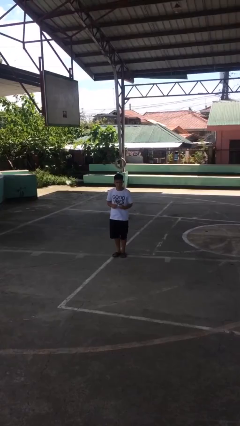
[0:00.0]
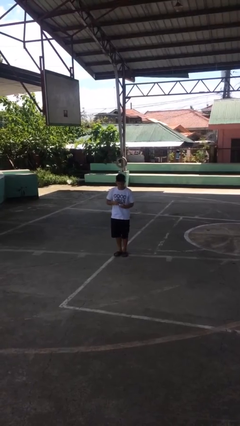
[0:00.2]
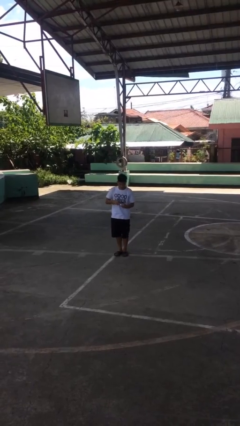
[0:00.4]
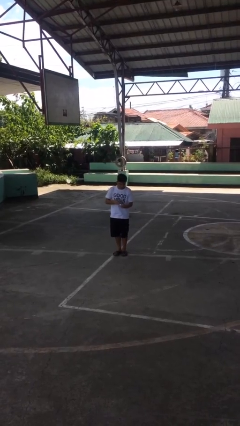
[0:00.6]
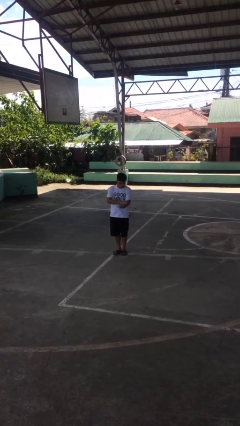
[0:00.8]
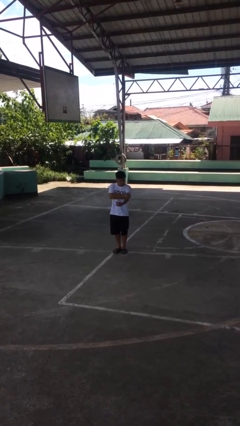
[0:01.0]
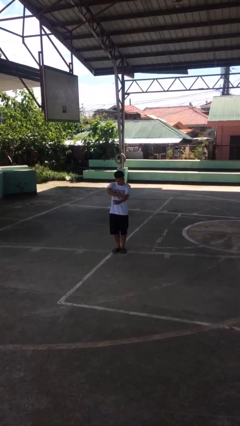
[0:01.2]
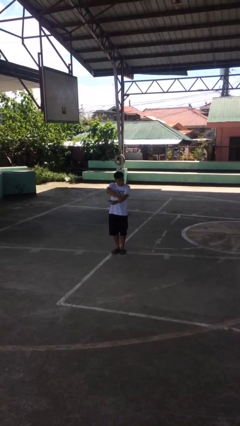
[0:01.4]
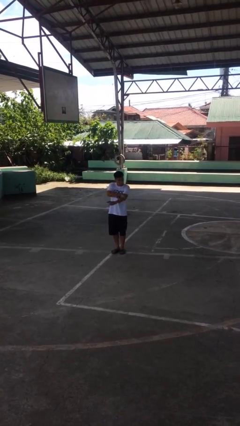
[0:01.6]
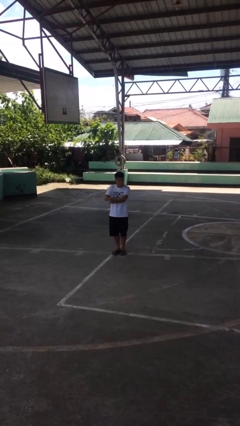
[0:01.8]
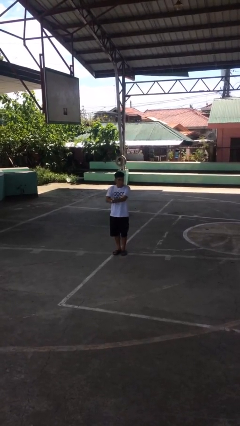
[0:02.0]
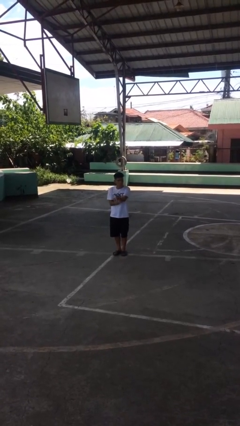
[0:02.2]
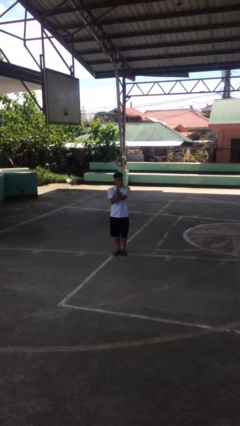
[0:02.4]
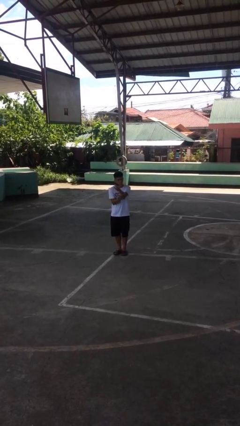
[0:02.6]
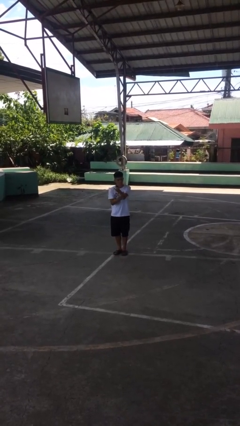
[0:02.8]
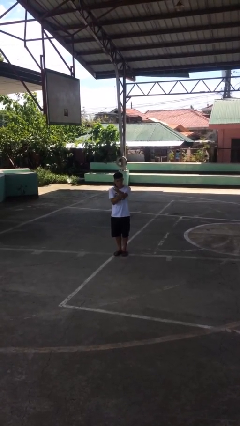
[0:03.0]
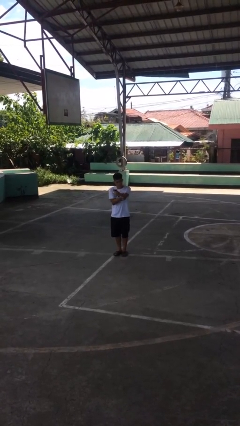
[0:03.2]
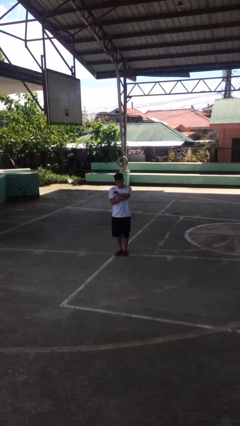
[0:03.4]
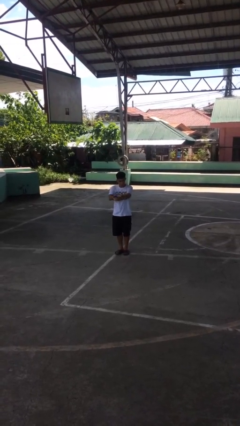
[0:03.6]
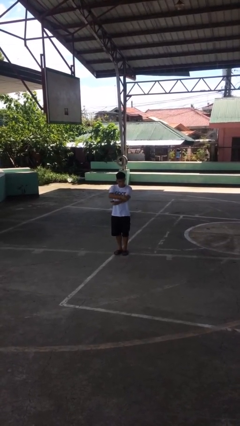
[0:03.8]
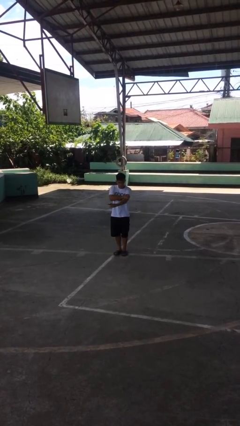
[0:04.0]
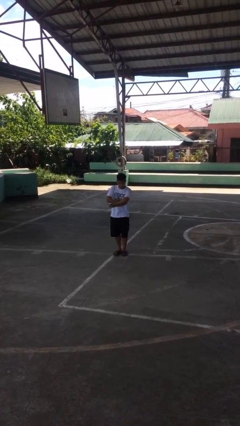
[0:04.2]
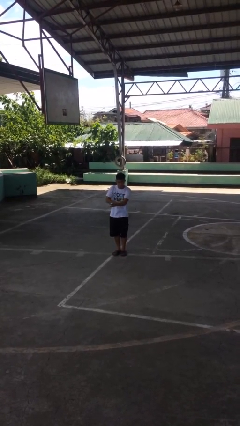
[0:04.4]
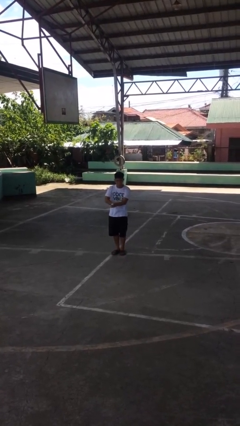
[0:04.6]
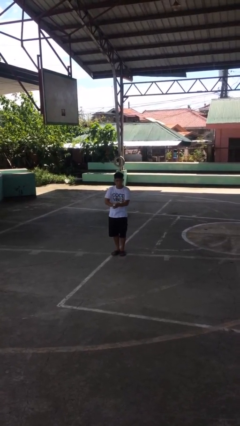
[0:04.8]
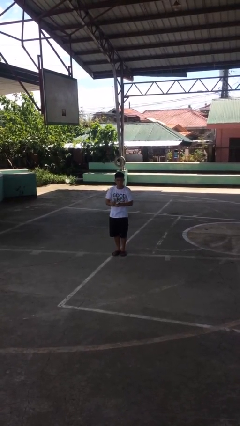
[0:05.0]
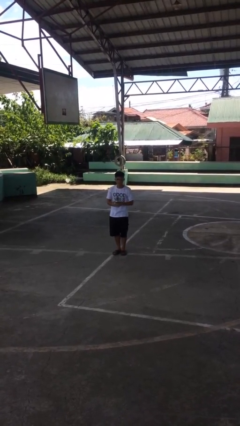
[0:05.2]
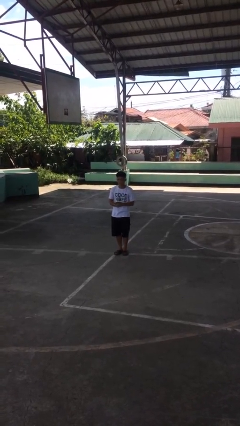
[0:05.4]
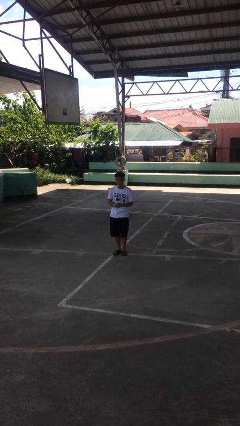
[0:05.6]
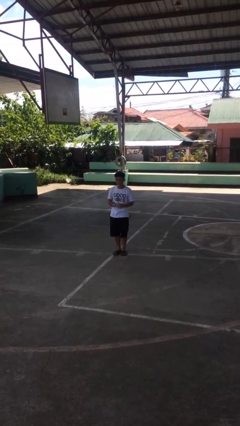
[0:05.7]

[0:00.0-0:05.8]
person applies sunscreen

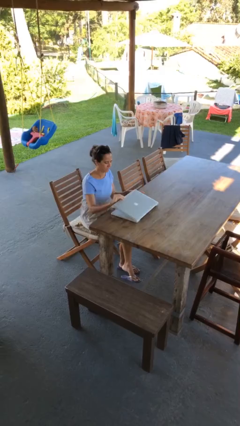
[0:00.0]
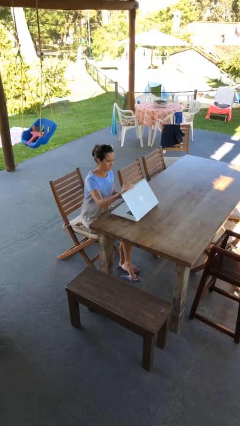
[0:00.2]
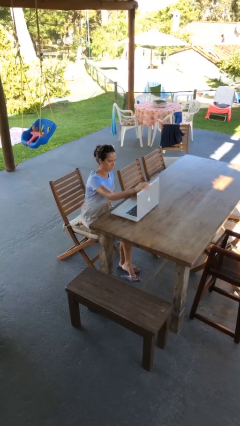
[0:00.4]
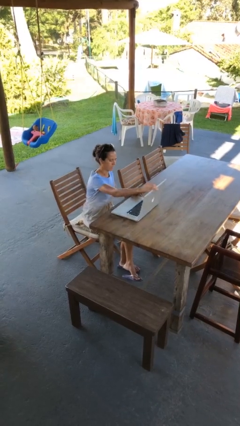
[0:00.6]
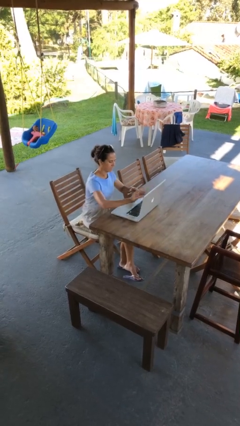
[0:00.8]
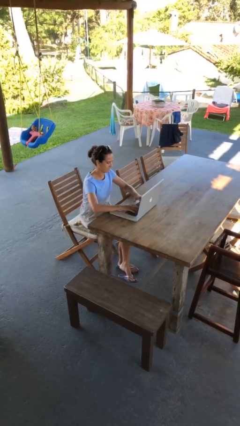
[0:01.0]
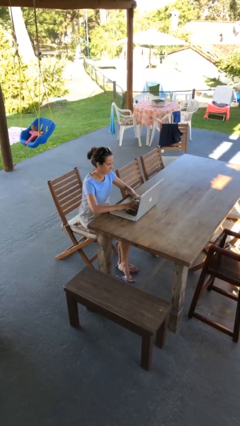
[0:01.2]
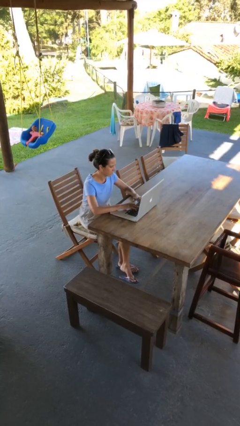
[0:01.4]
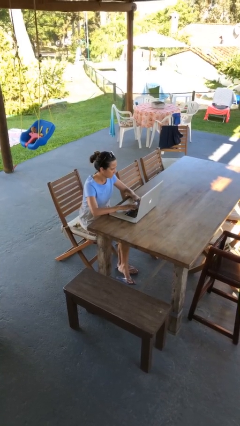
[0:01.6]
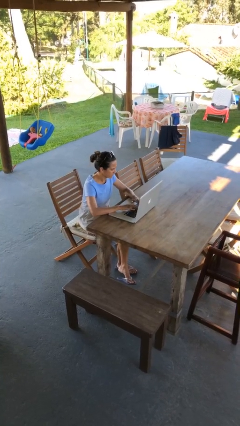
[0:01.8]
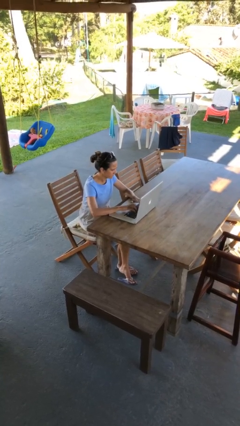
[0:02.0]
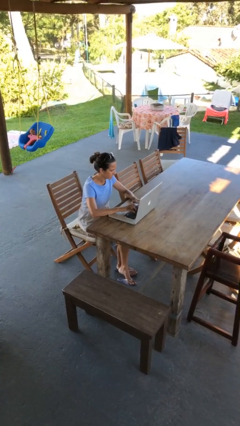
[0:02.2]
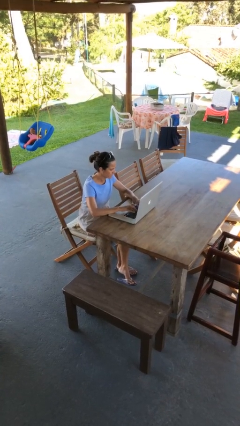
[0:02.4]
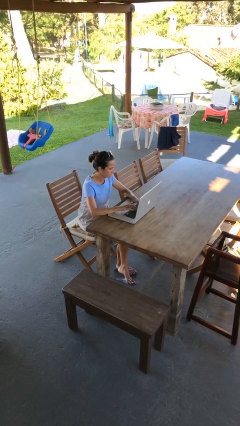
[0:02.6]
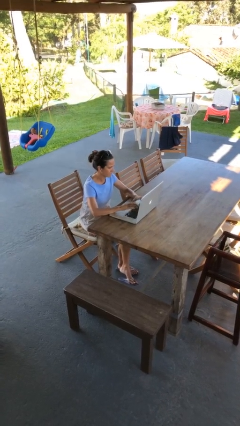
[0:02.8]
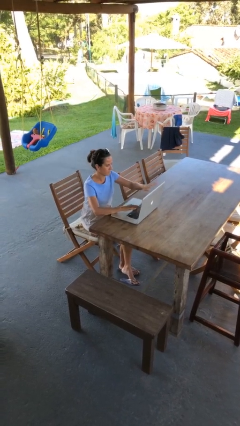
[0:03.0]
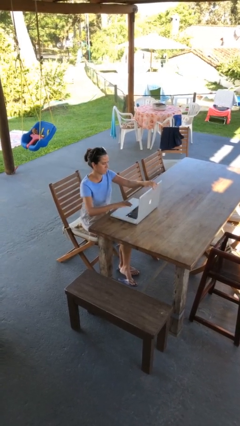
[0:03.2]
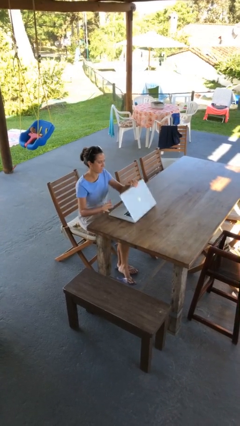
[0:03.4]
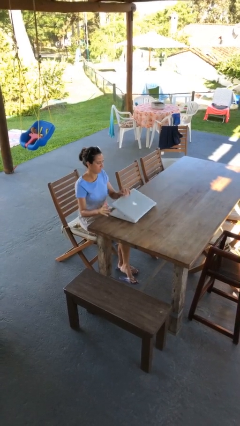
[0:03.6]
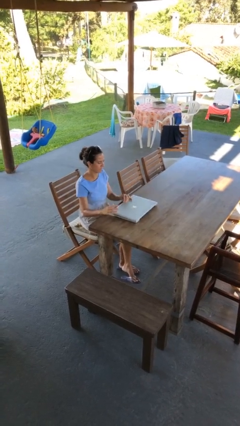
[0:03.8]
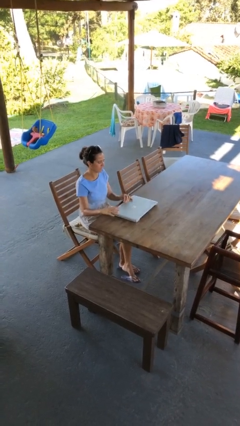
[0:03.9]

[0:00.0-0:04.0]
person interacts with laptop

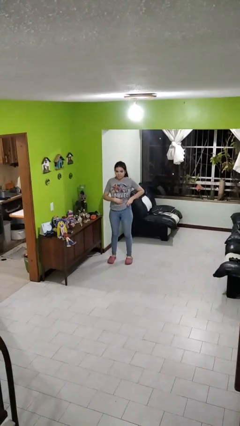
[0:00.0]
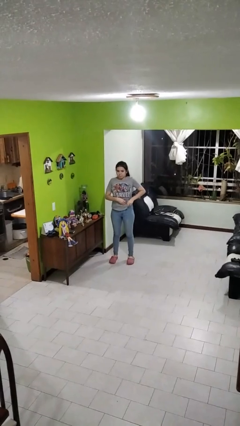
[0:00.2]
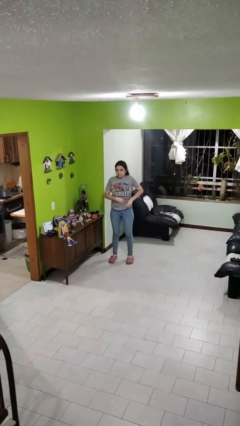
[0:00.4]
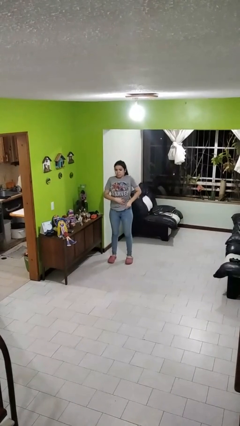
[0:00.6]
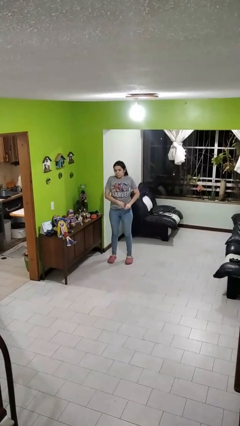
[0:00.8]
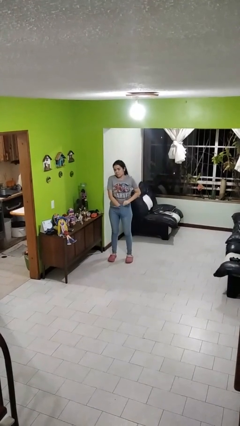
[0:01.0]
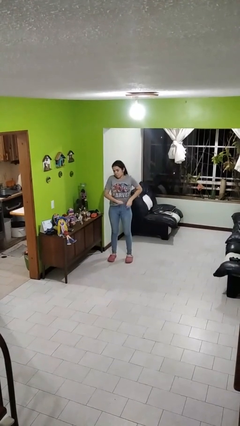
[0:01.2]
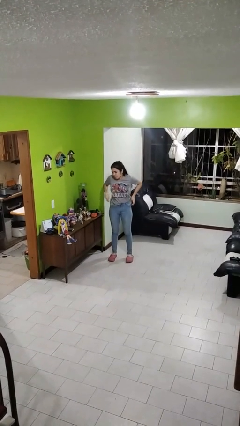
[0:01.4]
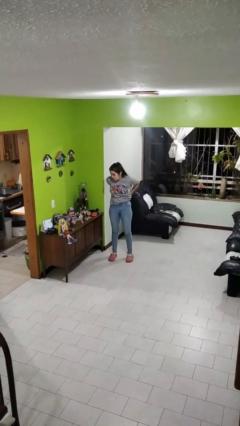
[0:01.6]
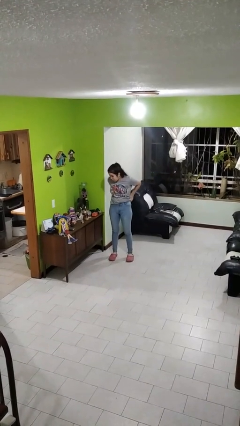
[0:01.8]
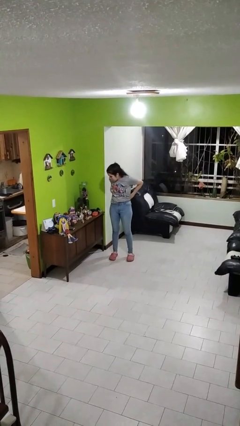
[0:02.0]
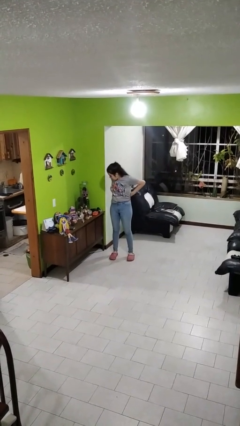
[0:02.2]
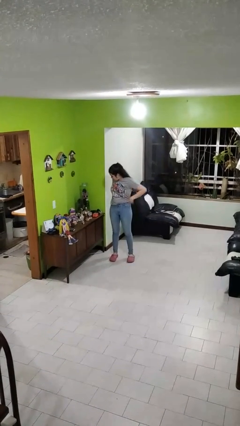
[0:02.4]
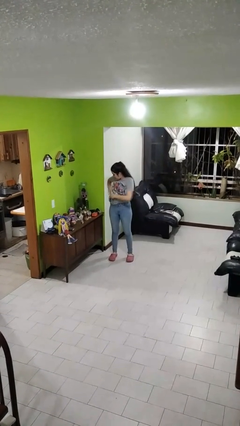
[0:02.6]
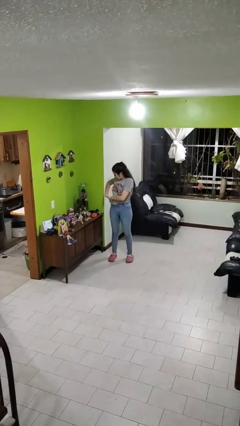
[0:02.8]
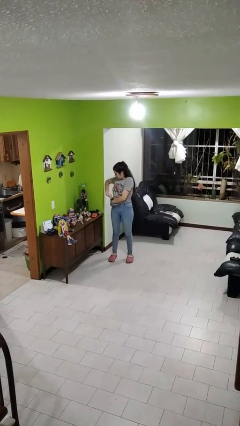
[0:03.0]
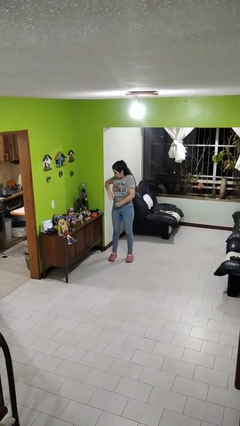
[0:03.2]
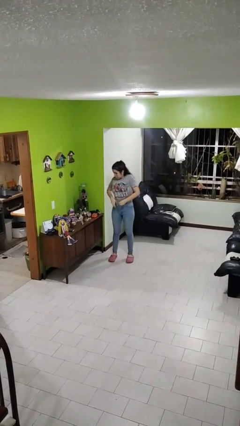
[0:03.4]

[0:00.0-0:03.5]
person tucks in shirt

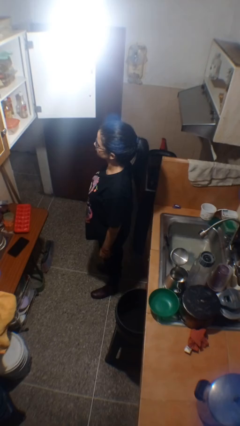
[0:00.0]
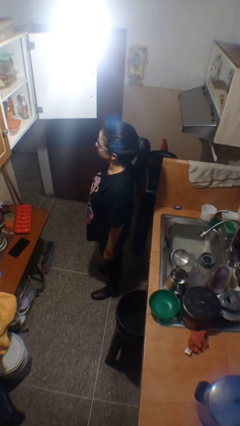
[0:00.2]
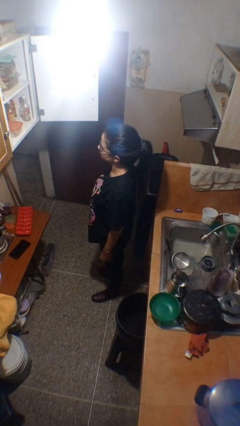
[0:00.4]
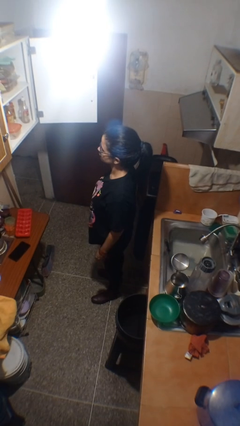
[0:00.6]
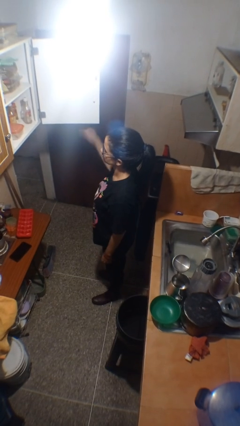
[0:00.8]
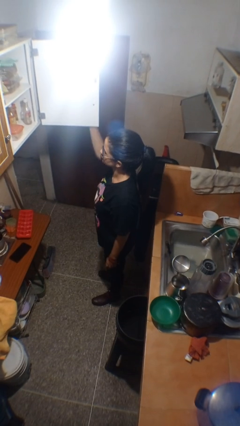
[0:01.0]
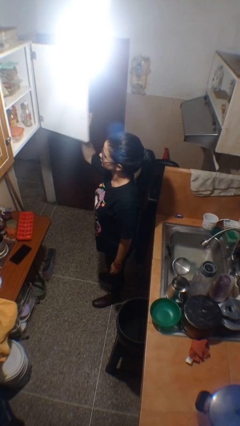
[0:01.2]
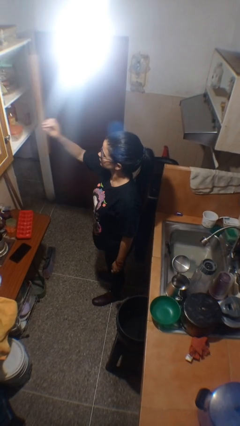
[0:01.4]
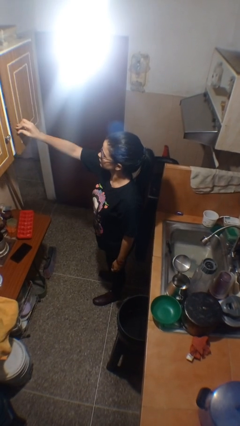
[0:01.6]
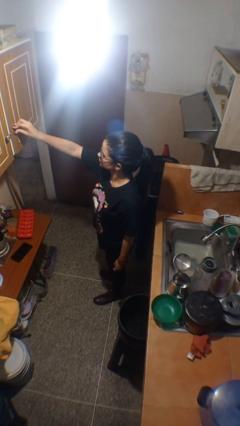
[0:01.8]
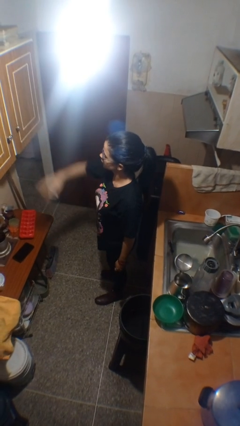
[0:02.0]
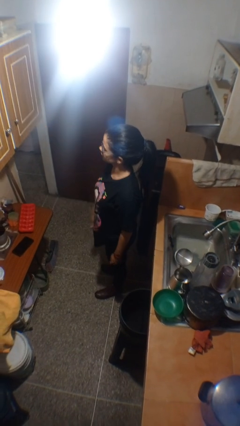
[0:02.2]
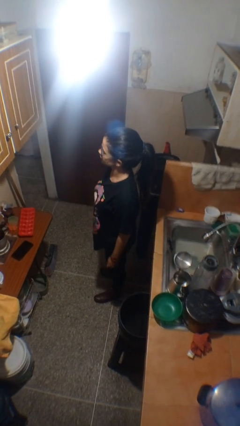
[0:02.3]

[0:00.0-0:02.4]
person closes cabinet

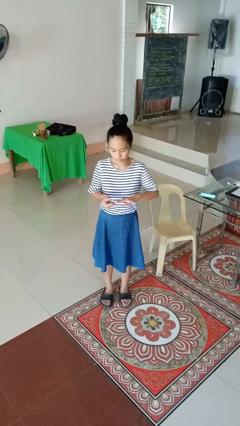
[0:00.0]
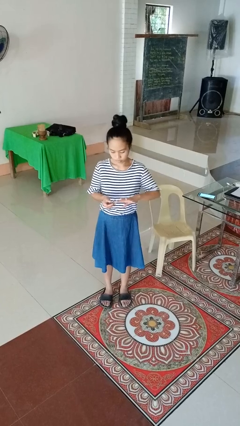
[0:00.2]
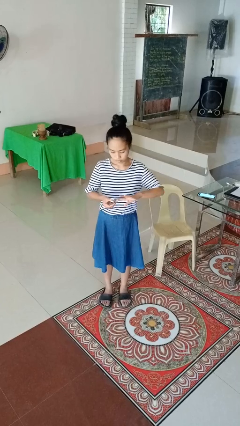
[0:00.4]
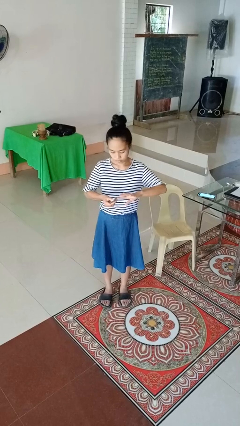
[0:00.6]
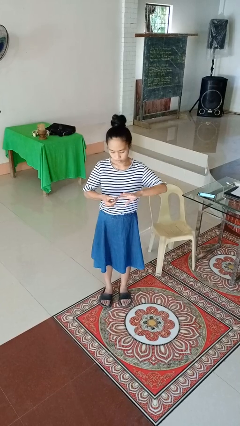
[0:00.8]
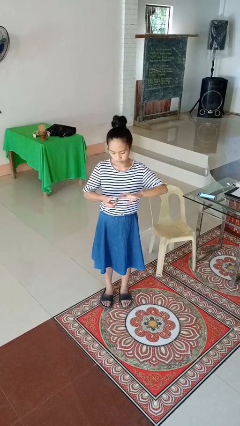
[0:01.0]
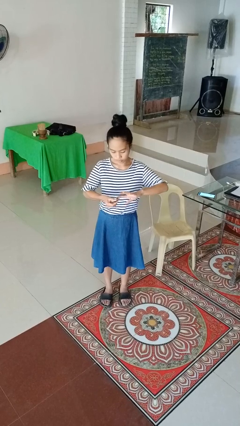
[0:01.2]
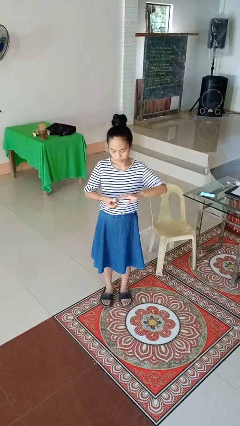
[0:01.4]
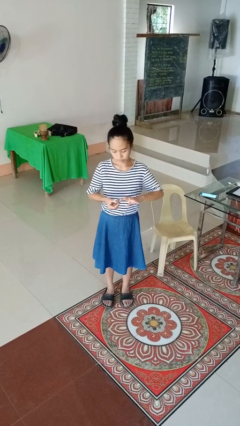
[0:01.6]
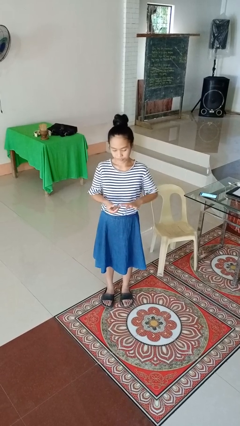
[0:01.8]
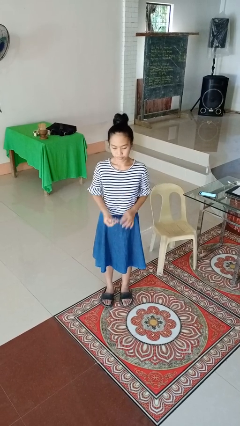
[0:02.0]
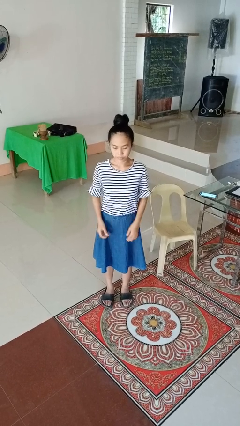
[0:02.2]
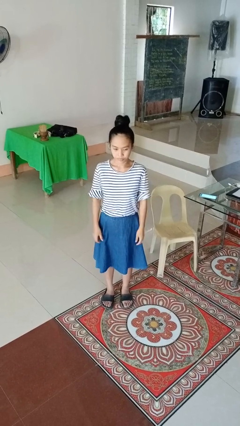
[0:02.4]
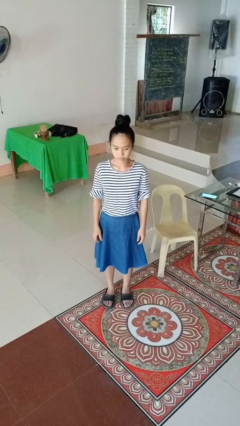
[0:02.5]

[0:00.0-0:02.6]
person clips fingernails
